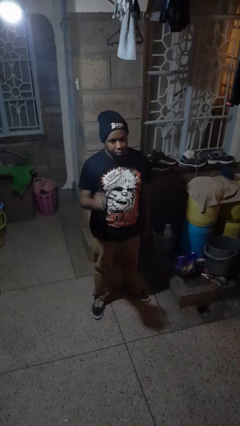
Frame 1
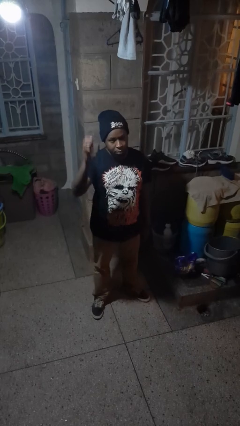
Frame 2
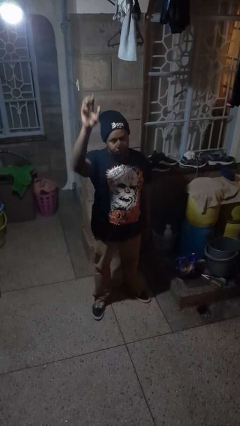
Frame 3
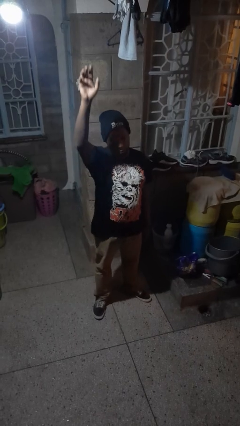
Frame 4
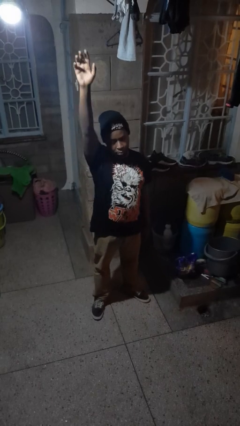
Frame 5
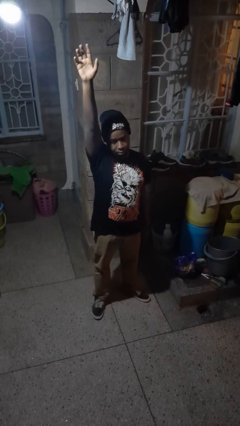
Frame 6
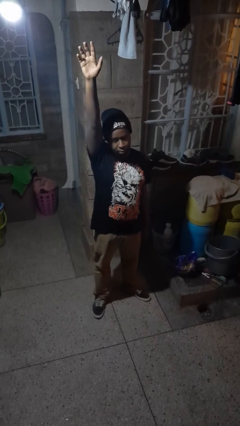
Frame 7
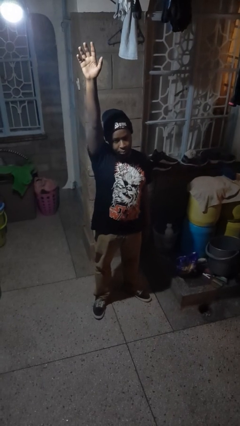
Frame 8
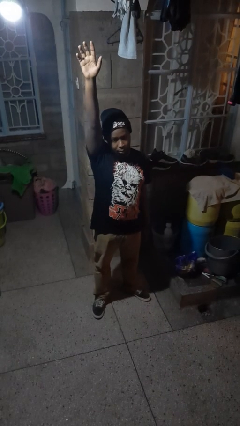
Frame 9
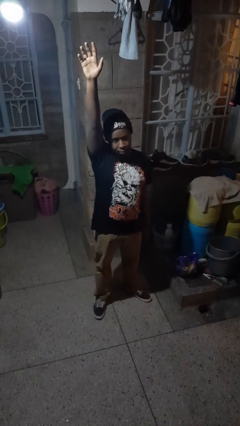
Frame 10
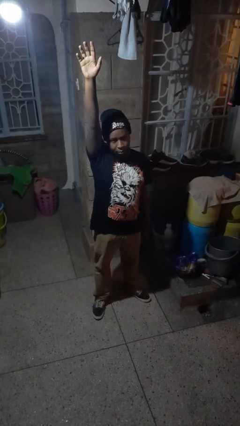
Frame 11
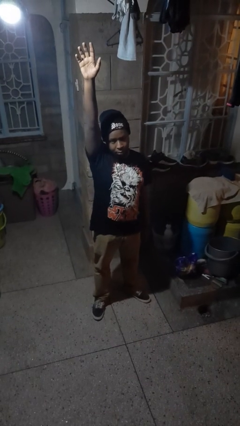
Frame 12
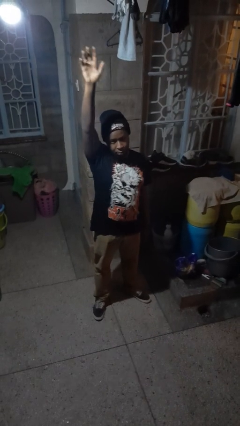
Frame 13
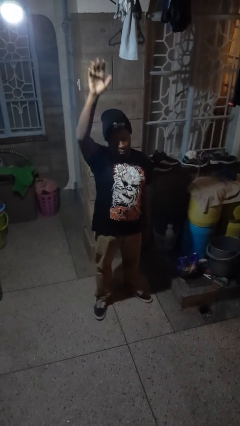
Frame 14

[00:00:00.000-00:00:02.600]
person gestures raise hand

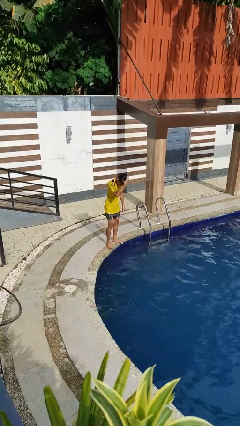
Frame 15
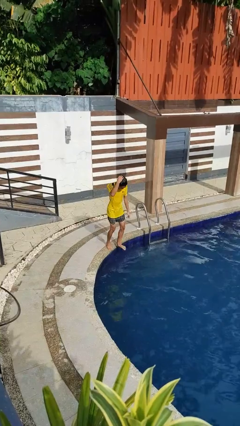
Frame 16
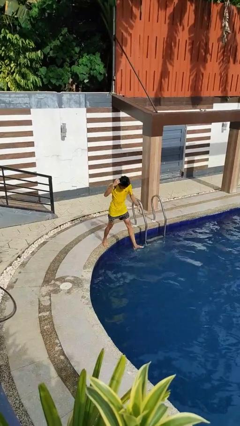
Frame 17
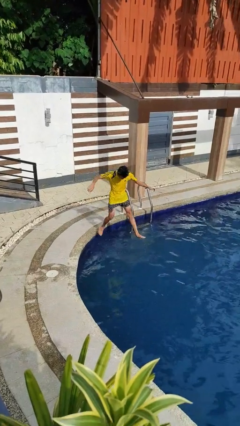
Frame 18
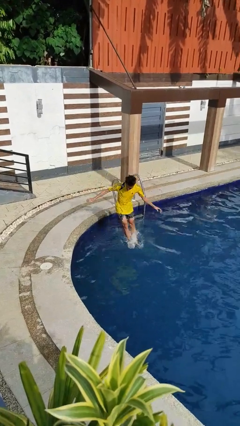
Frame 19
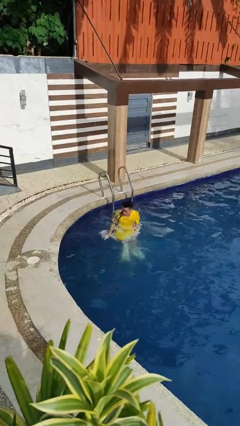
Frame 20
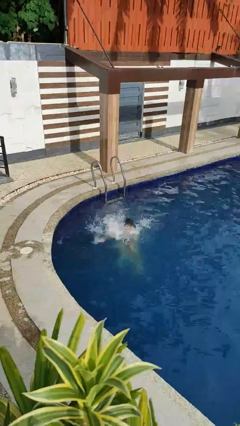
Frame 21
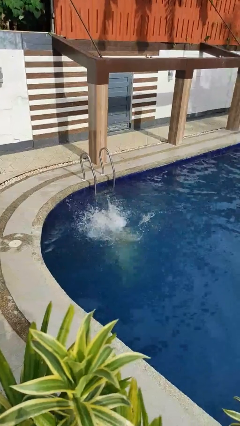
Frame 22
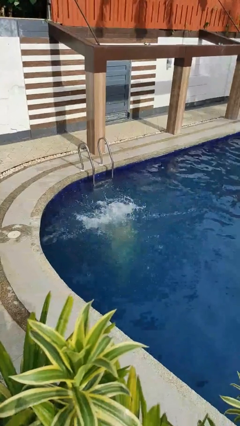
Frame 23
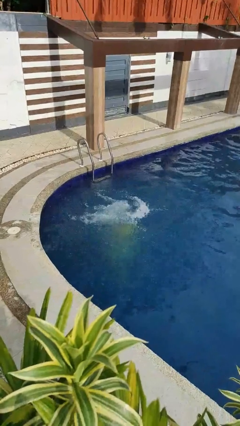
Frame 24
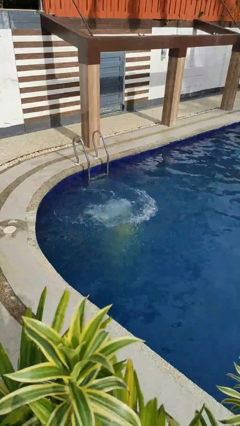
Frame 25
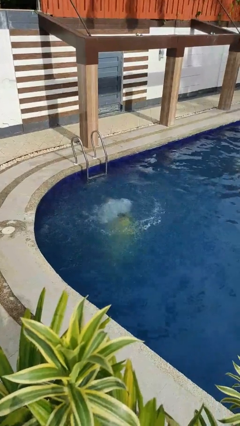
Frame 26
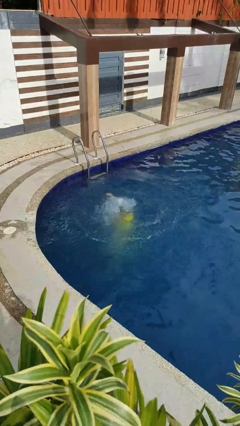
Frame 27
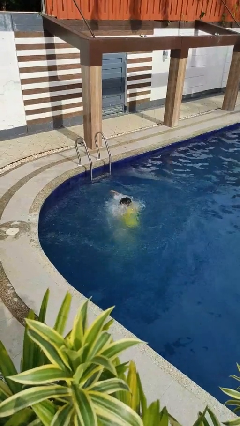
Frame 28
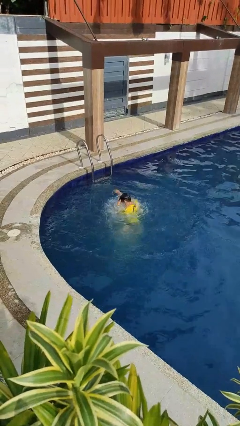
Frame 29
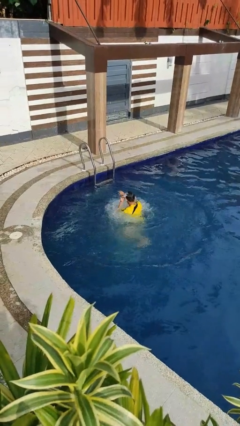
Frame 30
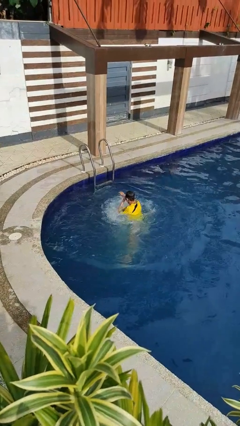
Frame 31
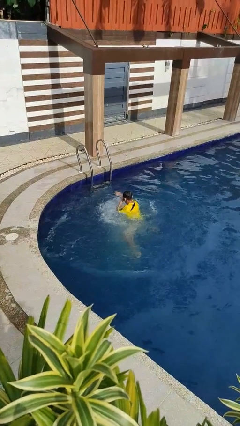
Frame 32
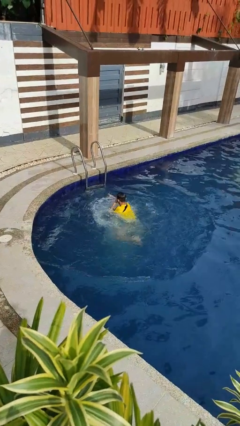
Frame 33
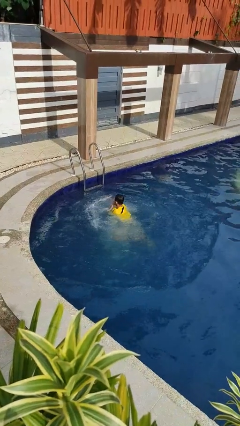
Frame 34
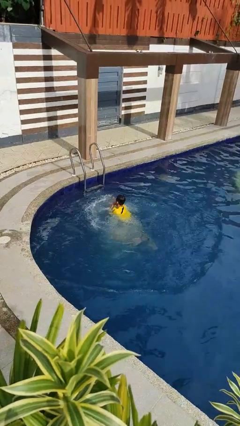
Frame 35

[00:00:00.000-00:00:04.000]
person jumps into pool

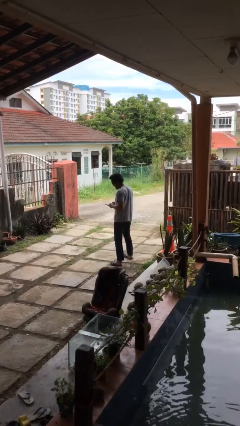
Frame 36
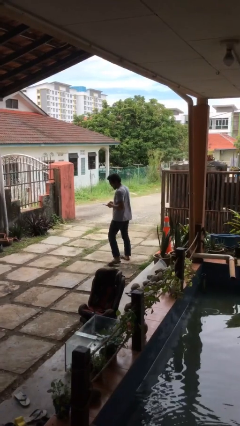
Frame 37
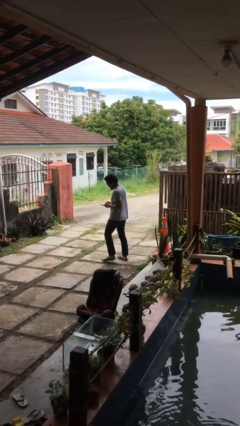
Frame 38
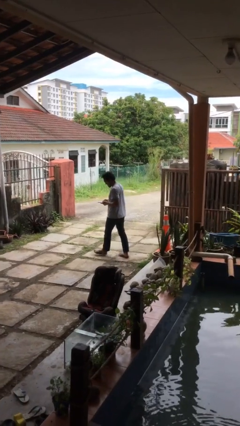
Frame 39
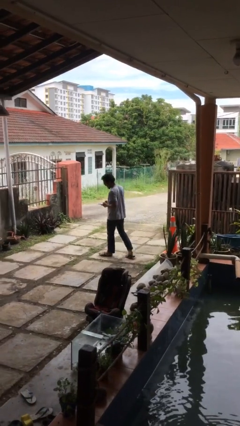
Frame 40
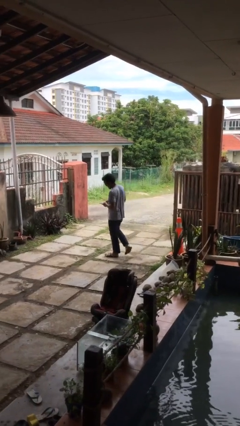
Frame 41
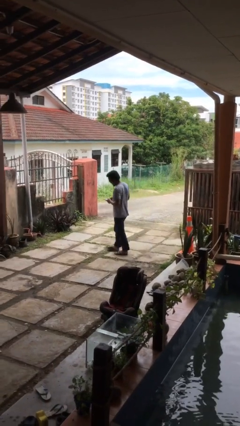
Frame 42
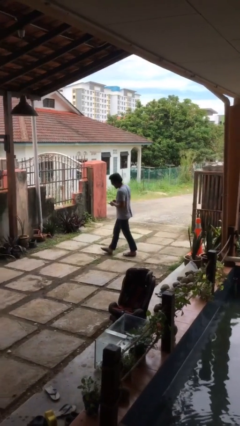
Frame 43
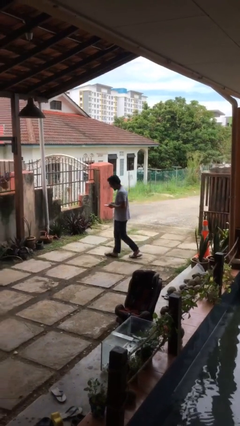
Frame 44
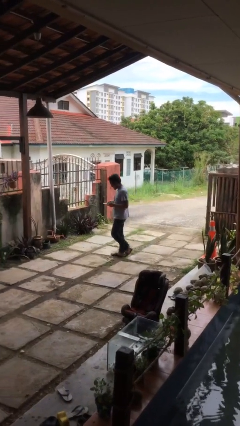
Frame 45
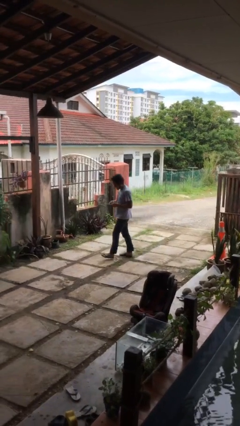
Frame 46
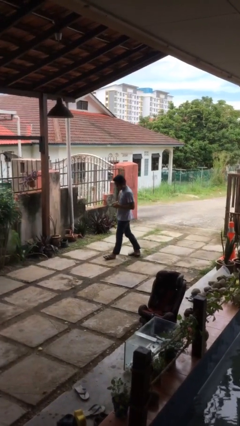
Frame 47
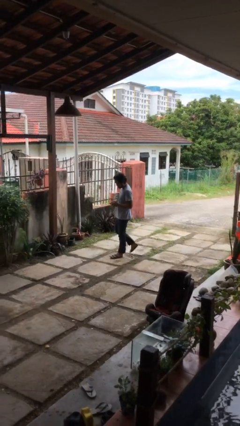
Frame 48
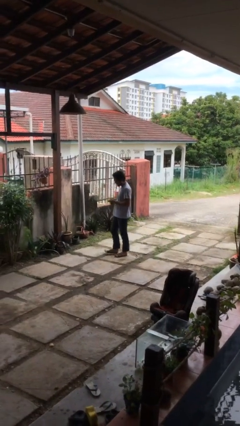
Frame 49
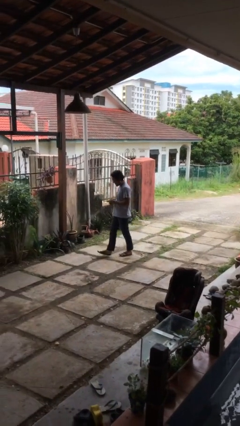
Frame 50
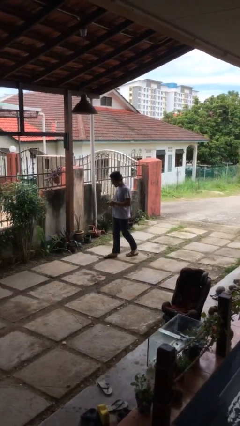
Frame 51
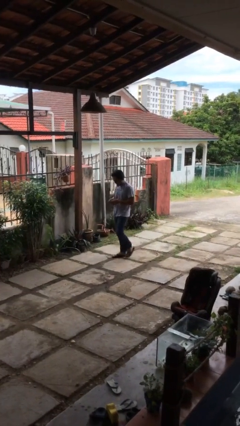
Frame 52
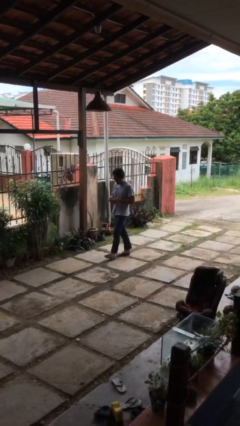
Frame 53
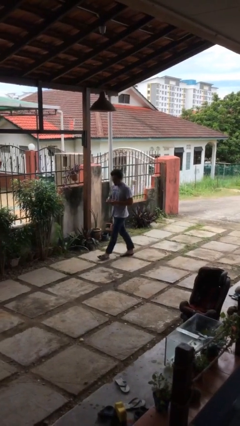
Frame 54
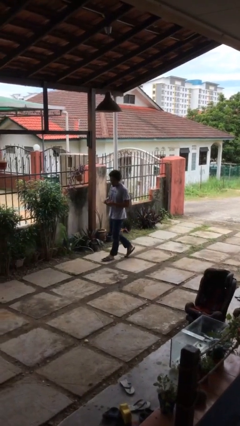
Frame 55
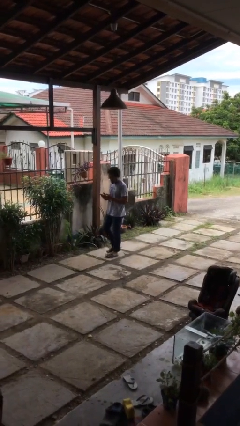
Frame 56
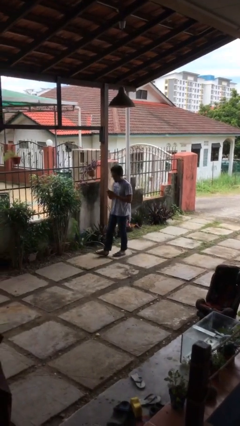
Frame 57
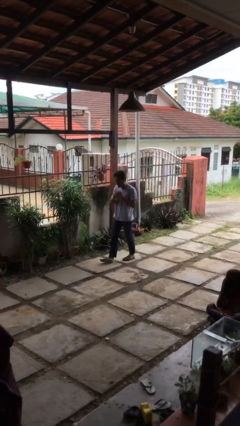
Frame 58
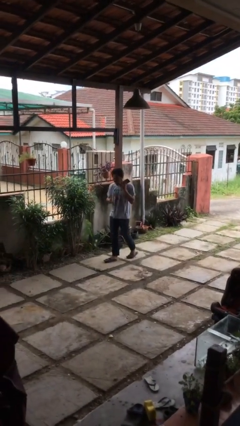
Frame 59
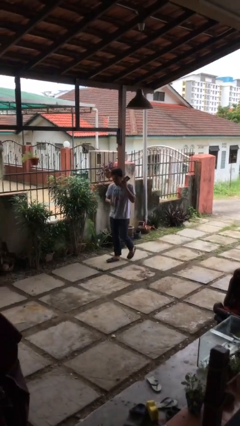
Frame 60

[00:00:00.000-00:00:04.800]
person texts on phone

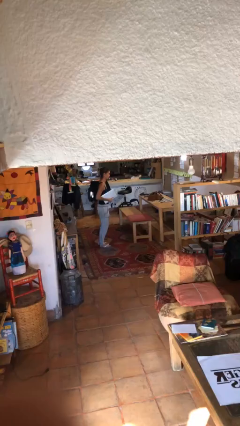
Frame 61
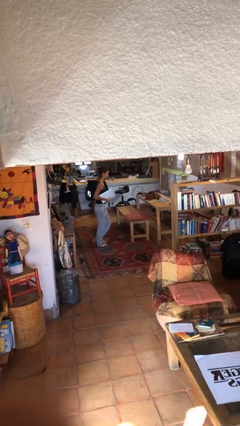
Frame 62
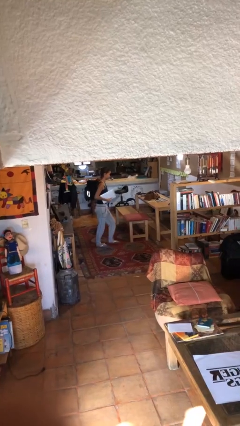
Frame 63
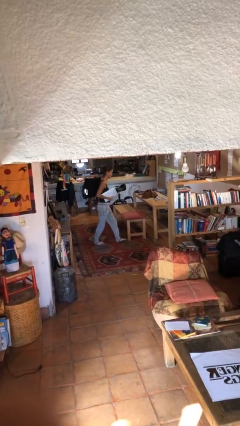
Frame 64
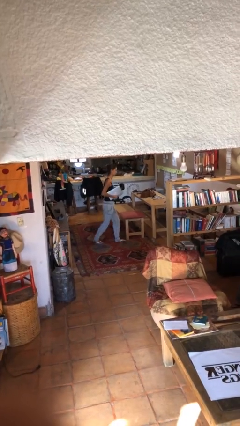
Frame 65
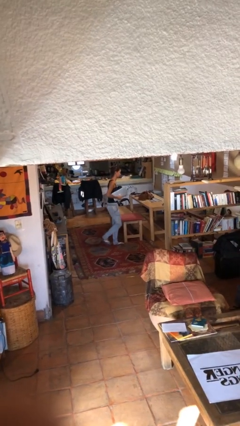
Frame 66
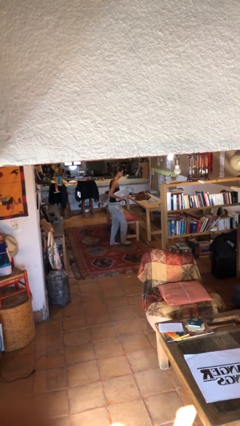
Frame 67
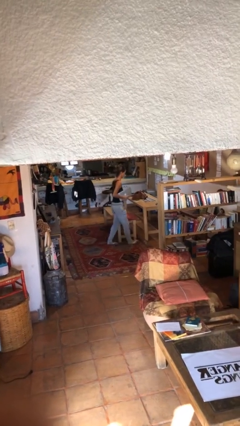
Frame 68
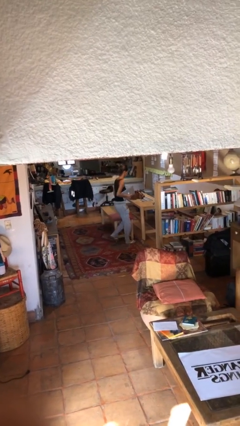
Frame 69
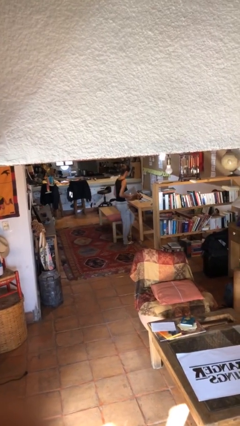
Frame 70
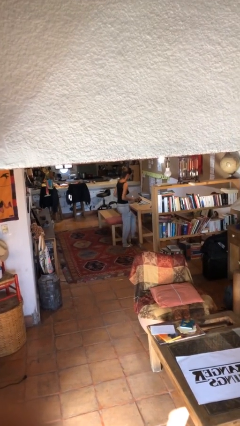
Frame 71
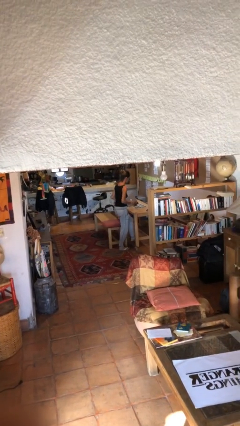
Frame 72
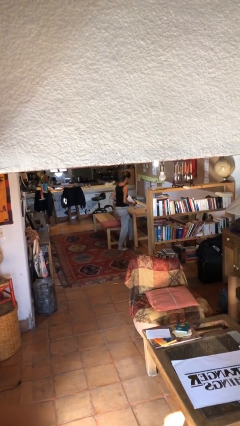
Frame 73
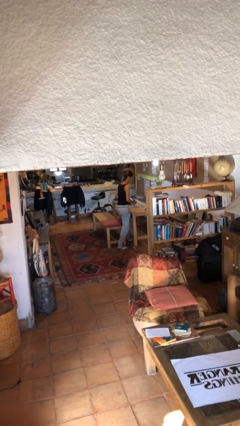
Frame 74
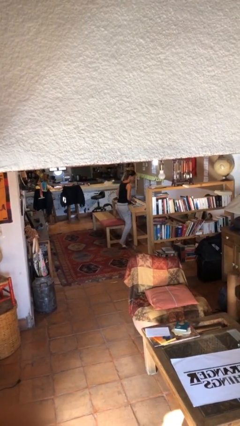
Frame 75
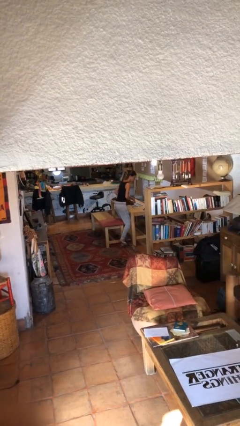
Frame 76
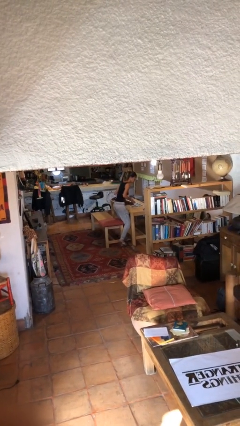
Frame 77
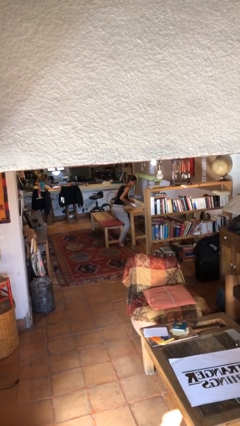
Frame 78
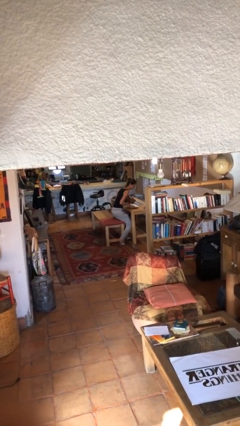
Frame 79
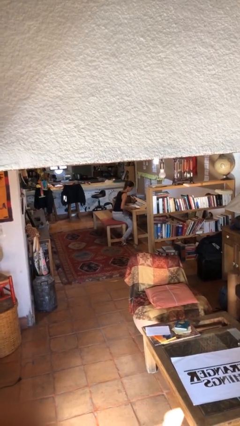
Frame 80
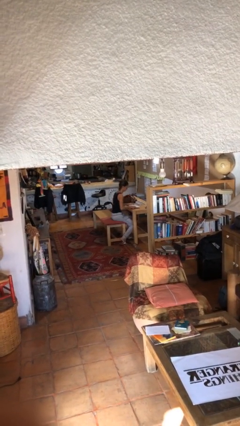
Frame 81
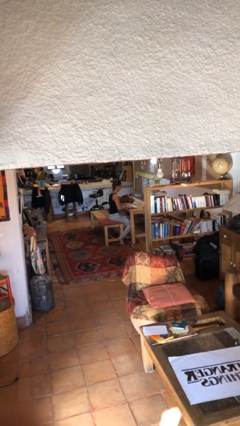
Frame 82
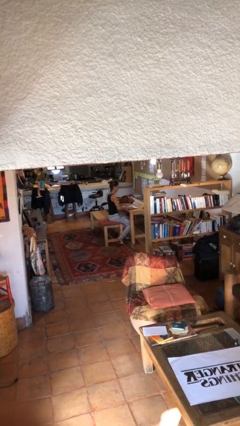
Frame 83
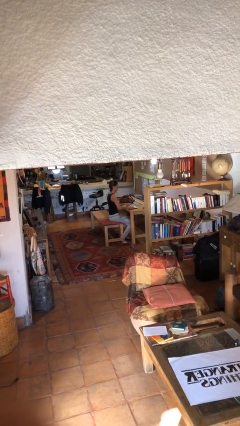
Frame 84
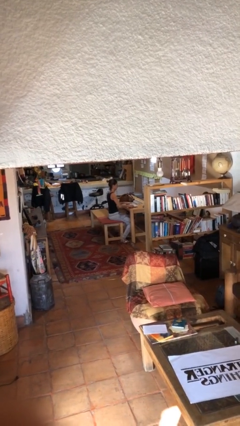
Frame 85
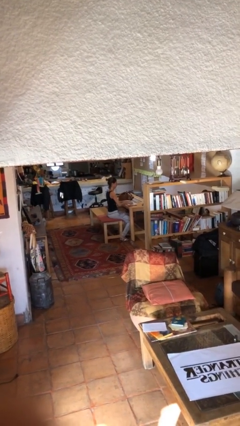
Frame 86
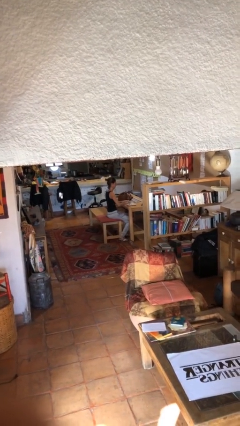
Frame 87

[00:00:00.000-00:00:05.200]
person sits down

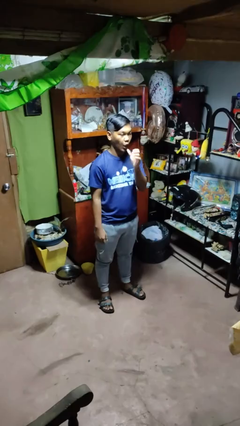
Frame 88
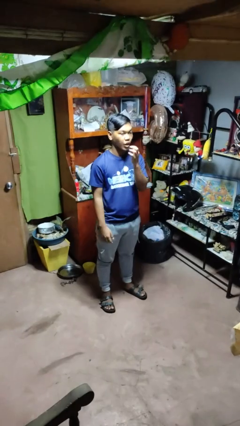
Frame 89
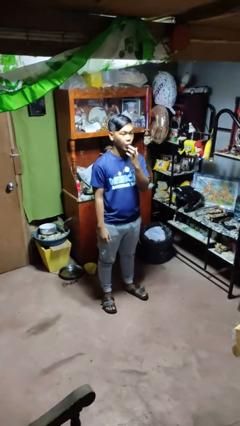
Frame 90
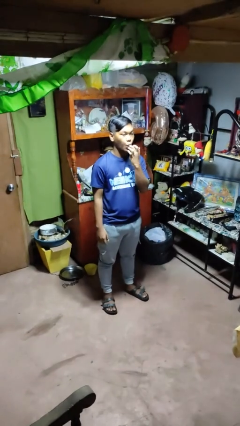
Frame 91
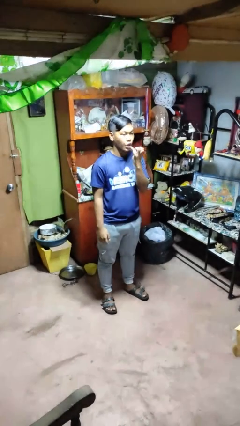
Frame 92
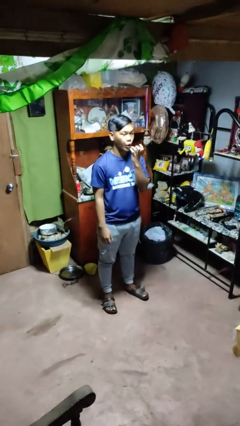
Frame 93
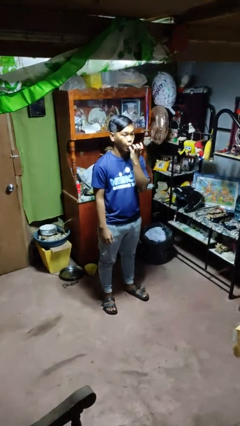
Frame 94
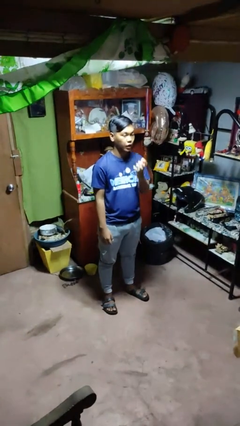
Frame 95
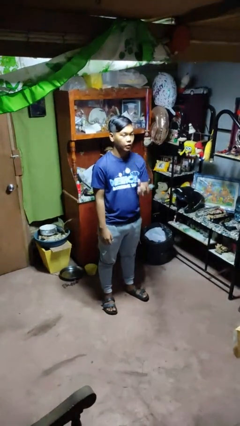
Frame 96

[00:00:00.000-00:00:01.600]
person licks fingers
